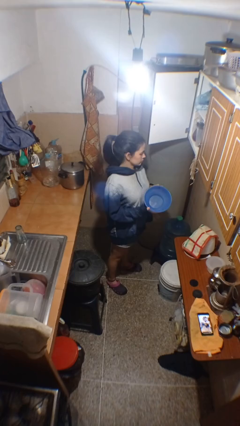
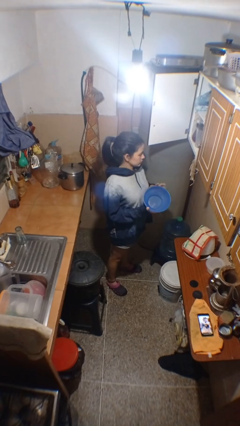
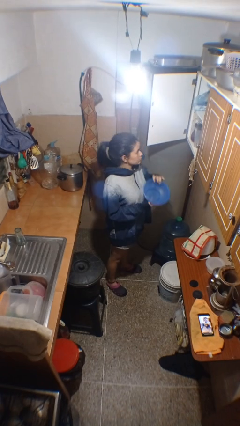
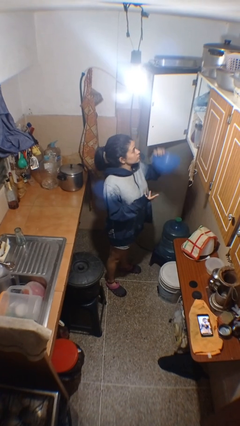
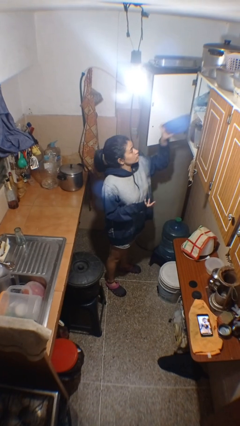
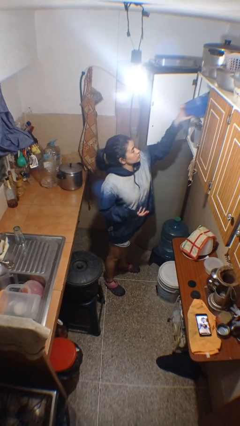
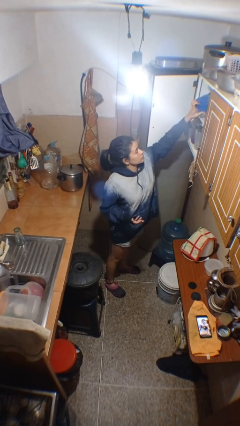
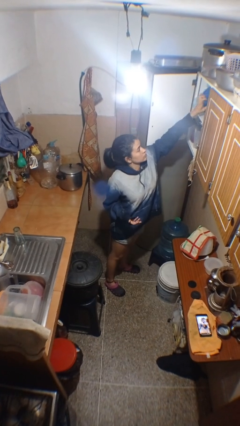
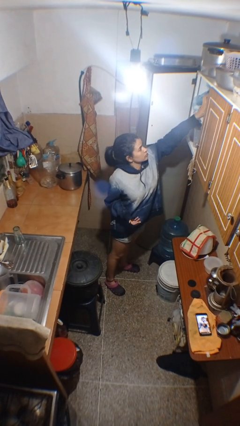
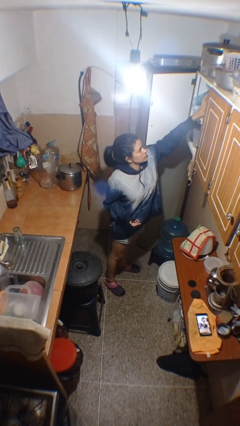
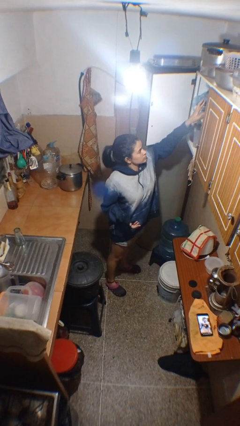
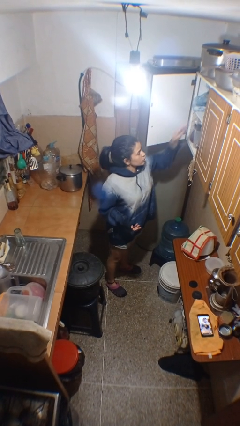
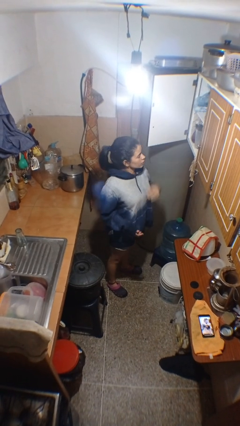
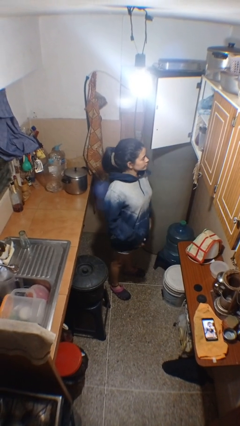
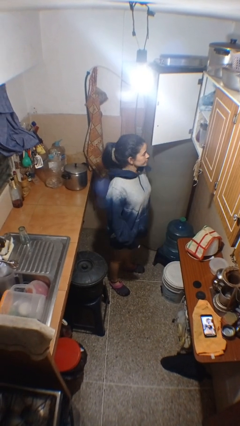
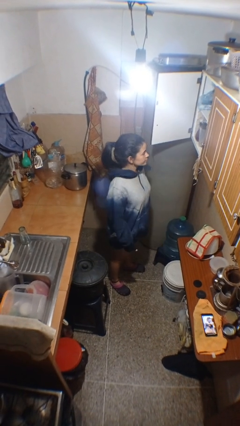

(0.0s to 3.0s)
person puts down object into cabinet

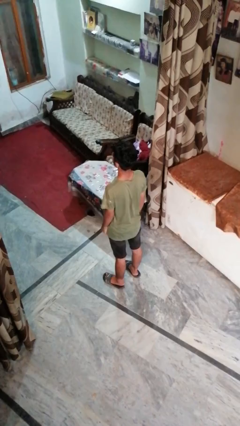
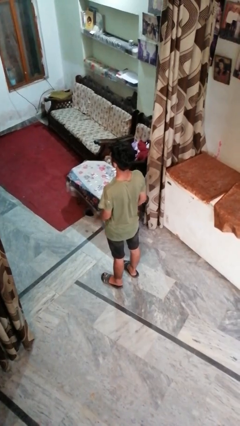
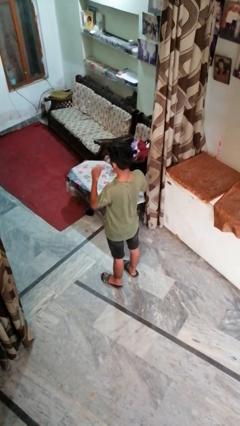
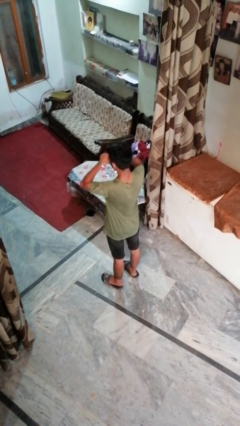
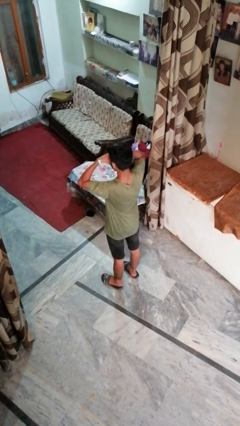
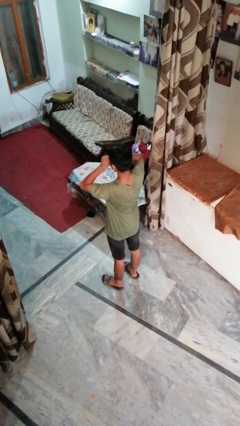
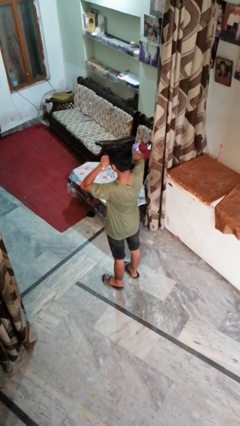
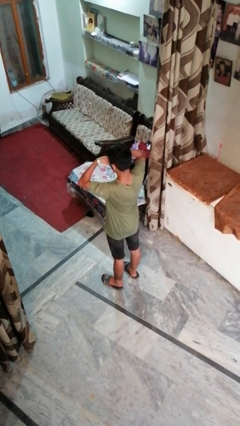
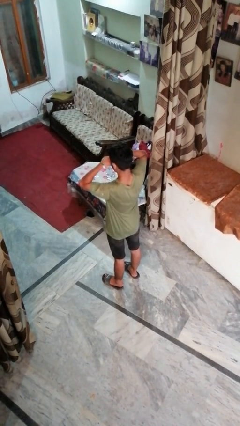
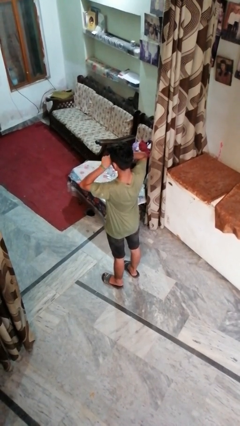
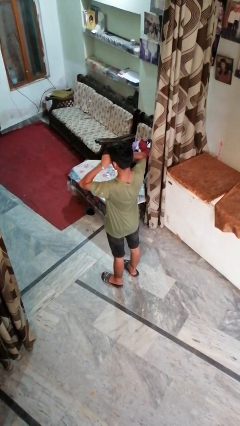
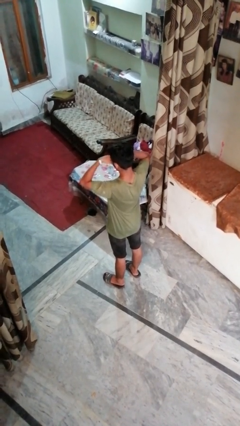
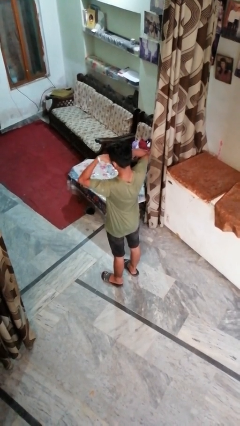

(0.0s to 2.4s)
person rubs eyes

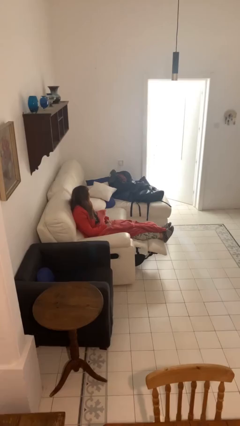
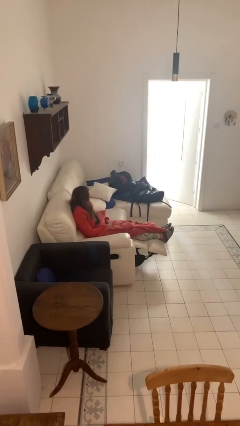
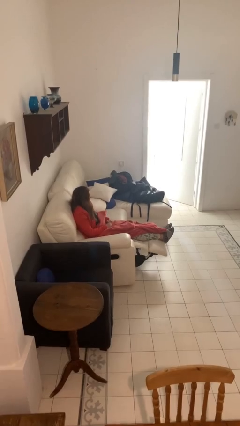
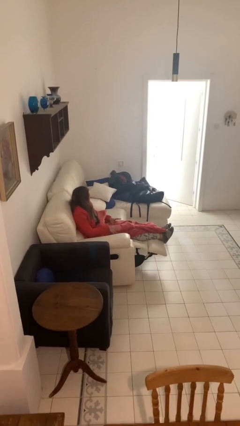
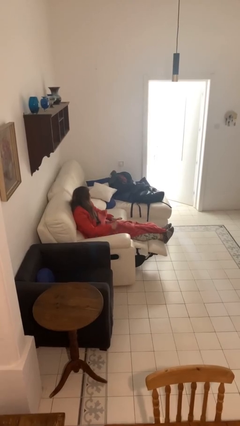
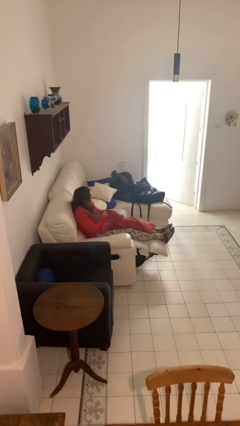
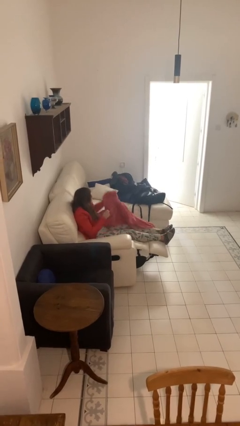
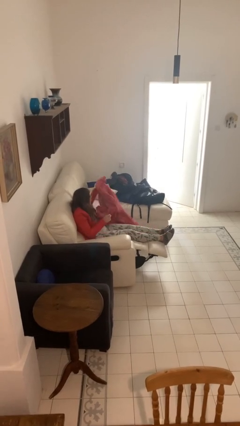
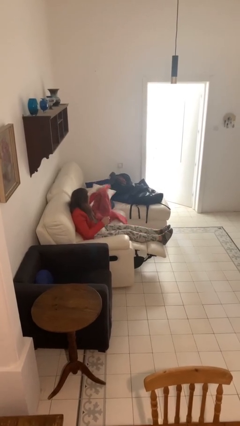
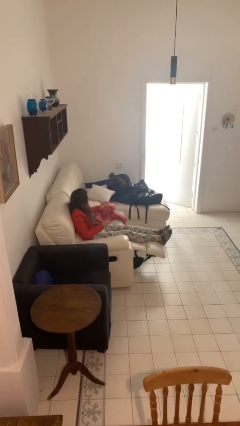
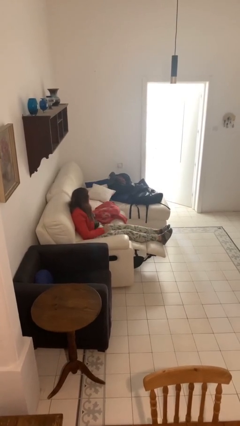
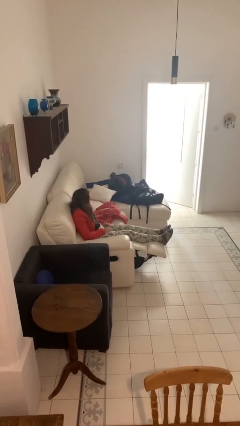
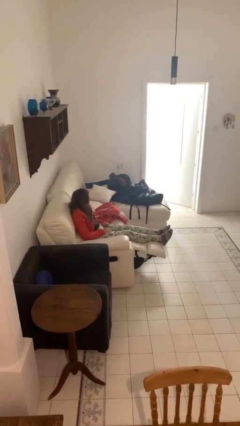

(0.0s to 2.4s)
person uncovers with blanket

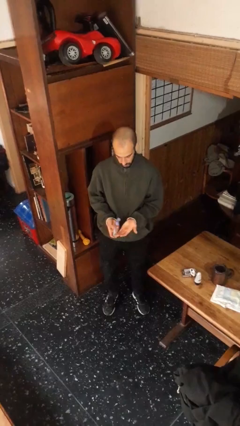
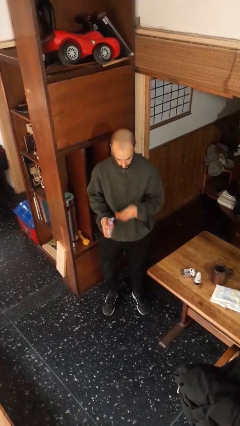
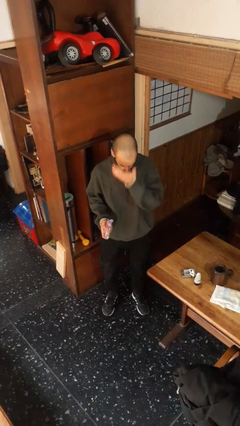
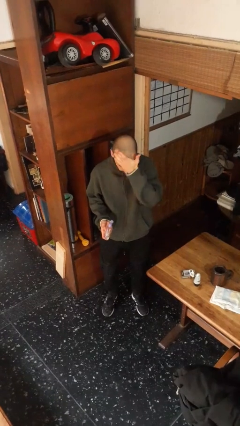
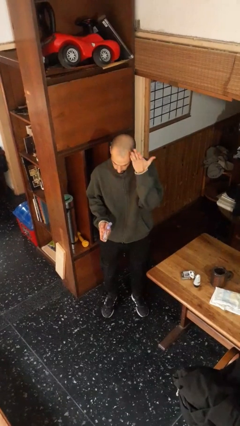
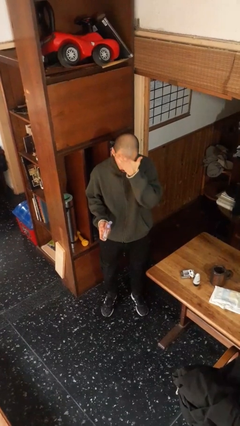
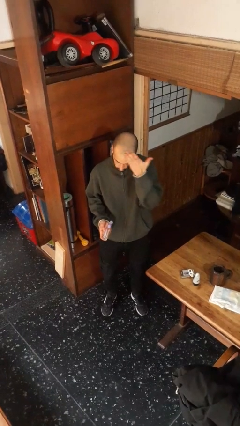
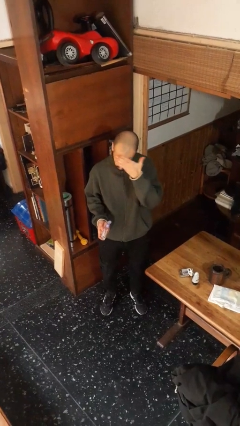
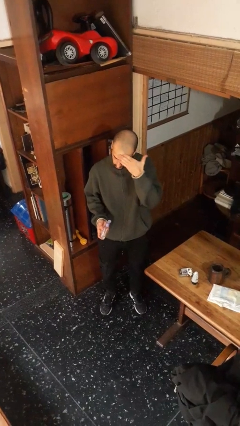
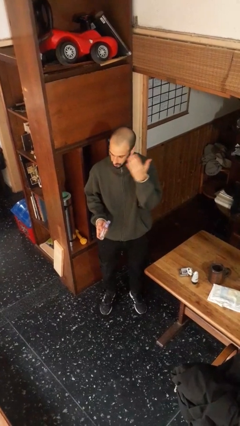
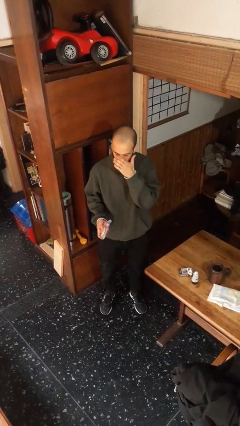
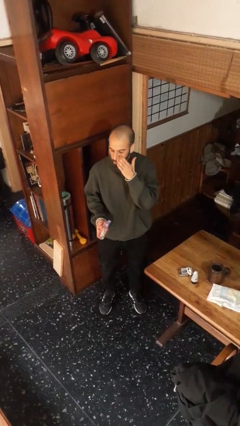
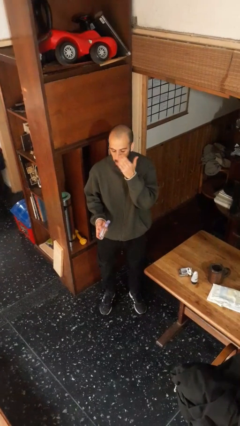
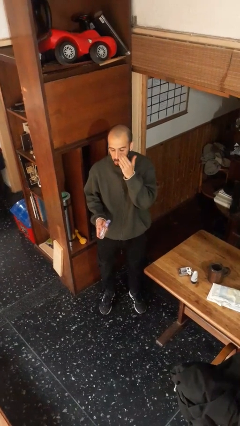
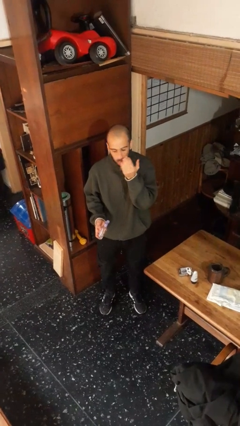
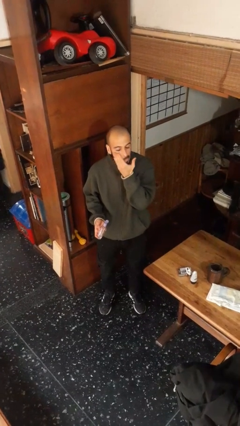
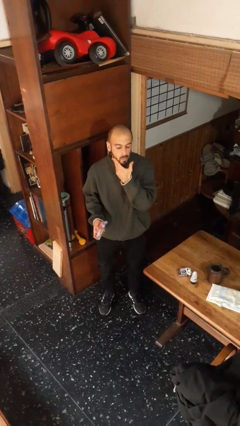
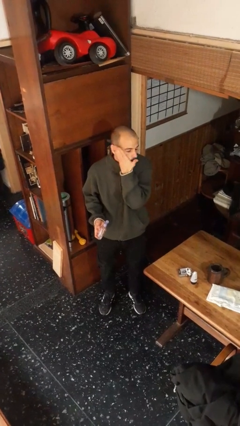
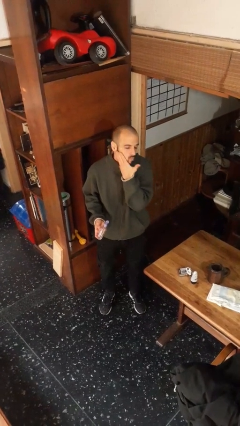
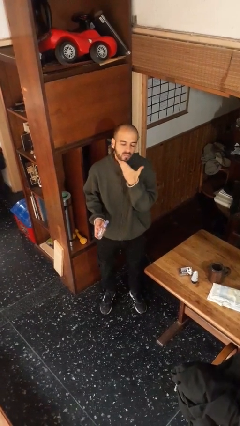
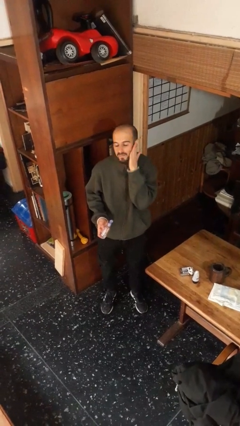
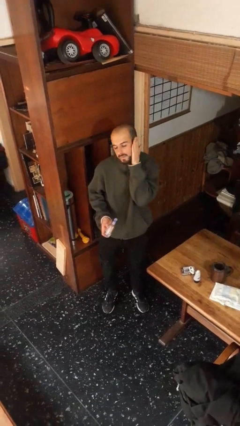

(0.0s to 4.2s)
person applies facial moisturizer

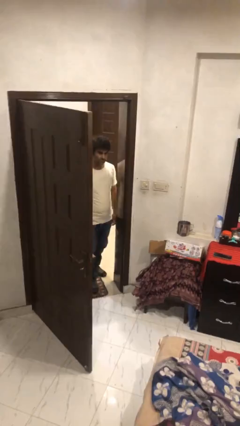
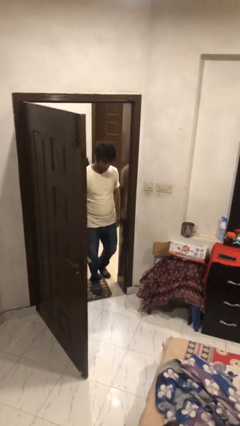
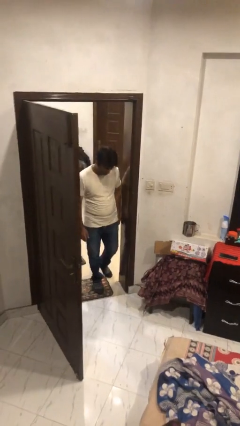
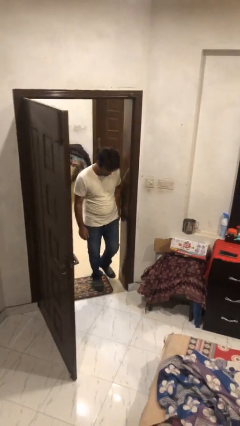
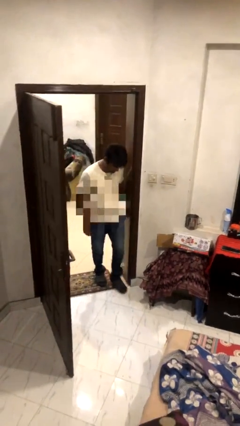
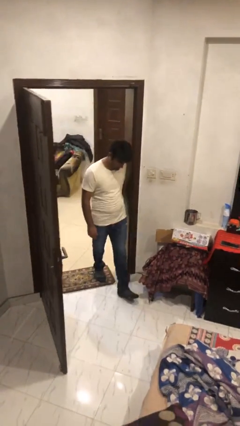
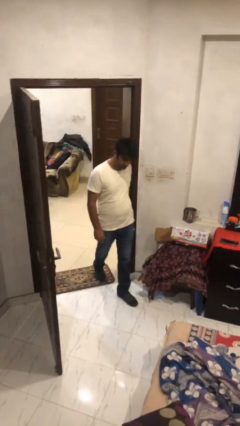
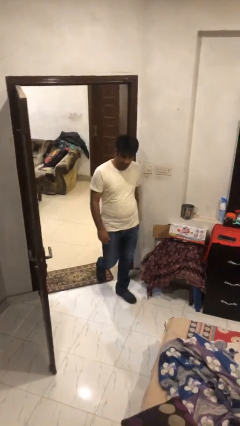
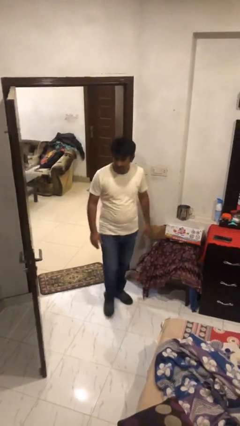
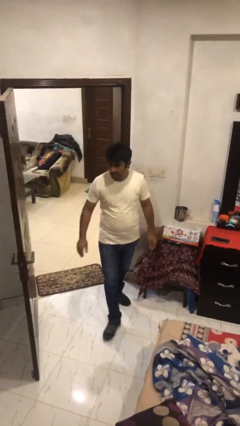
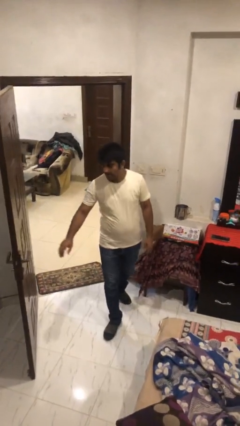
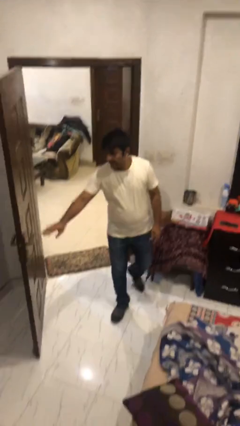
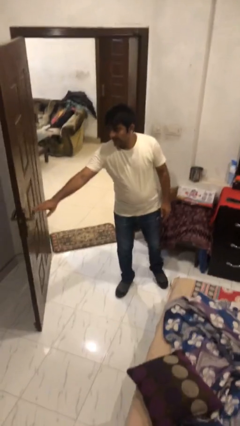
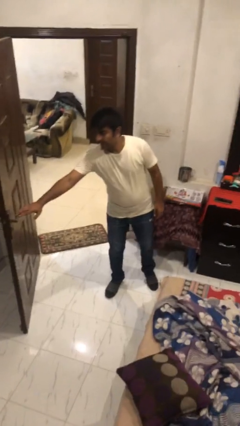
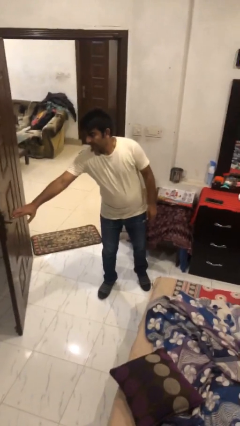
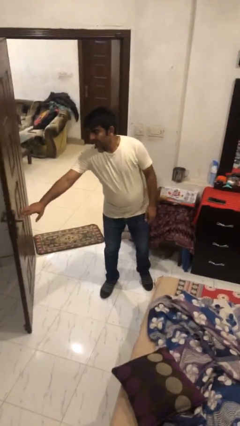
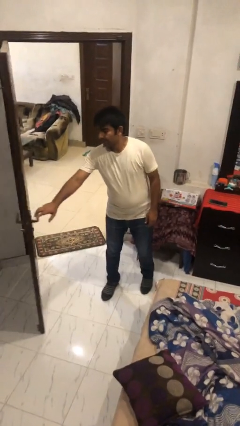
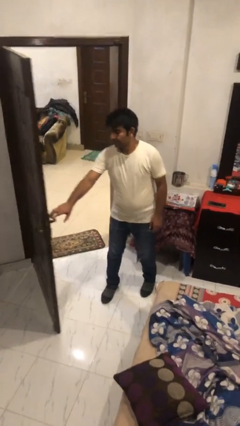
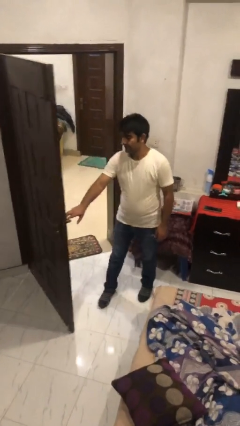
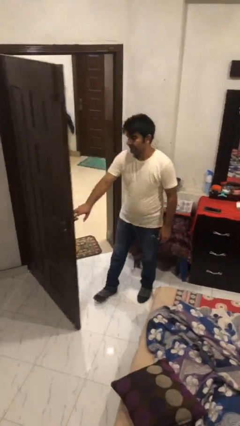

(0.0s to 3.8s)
person enters scene through structure

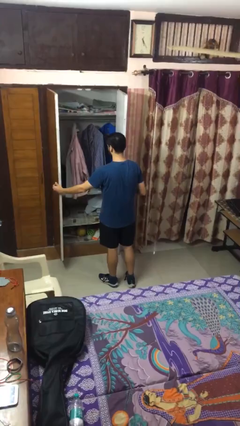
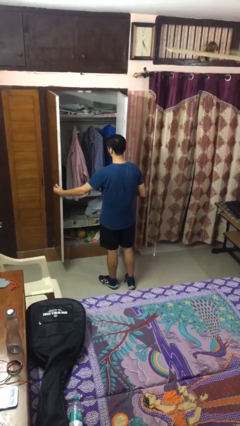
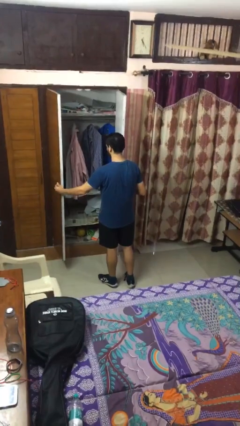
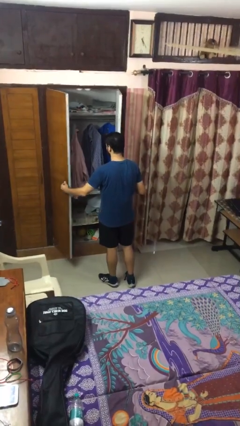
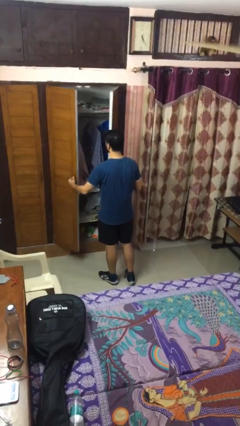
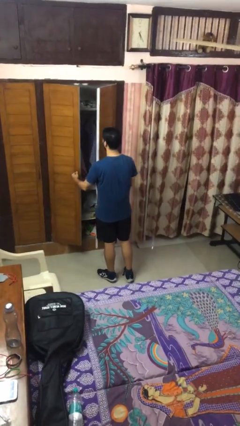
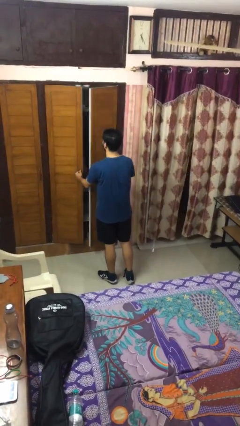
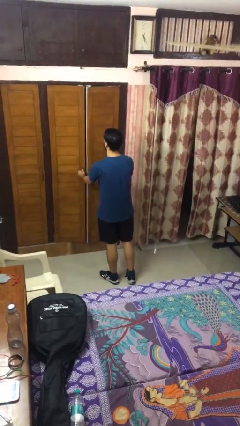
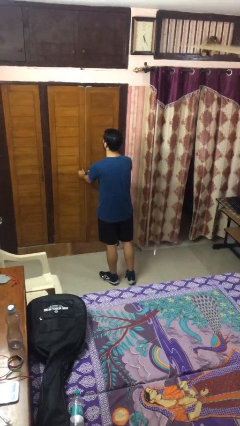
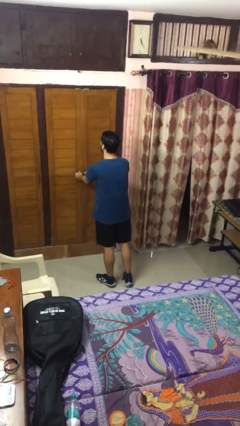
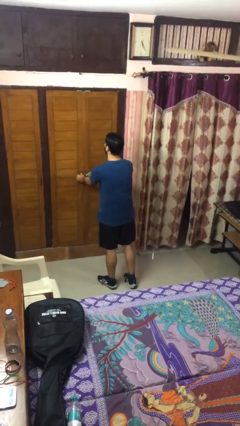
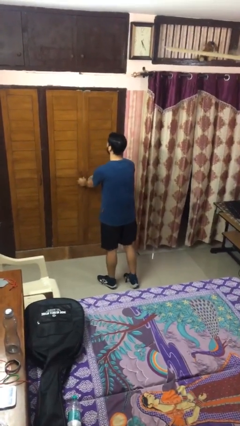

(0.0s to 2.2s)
person closes closet door
